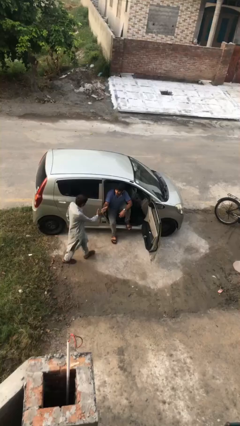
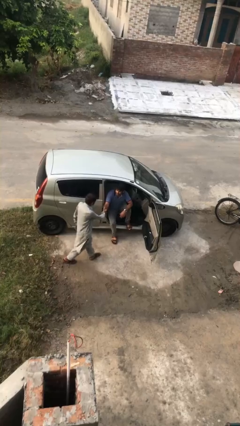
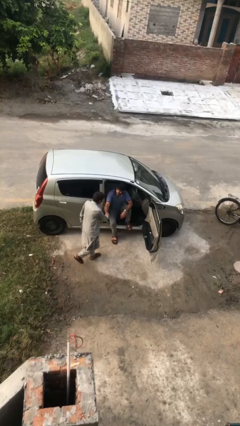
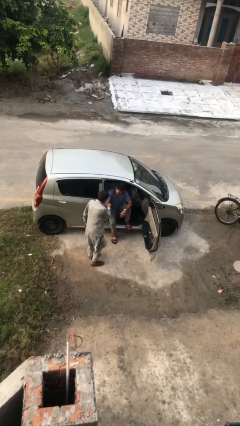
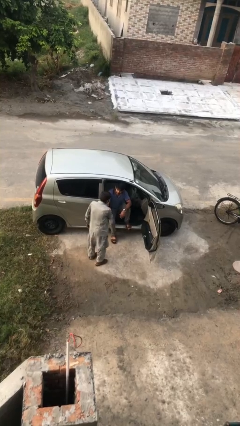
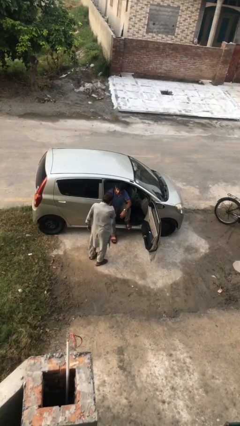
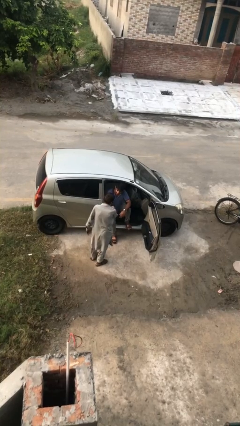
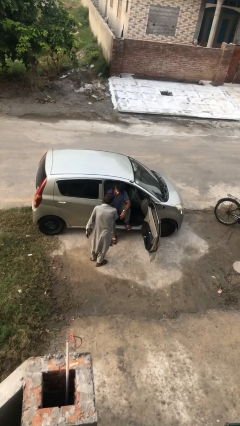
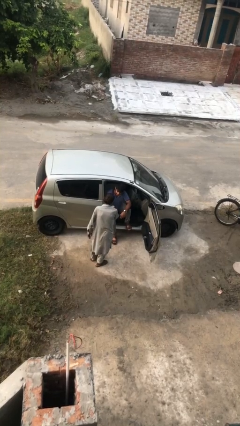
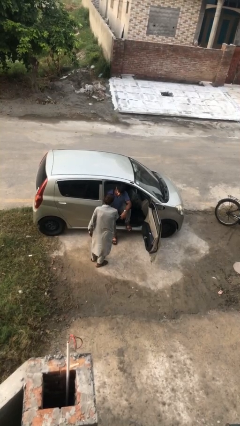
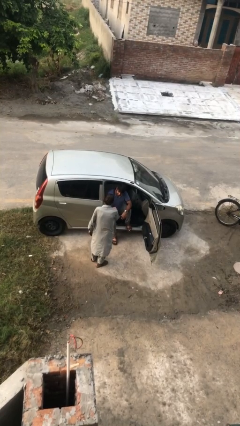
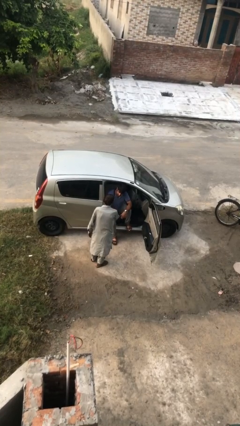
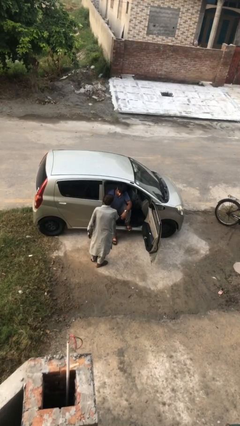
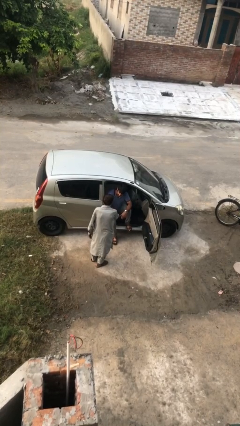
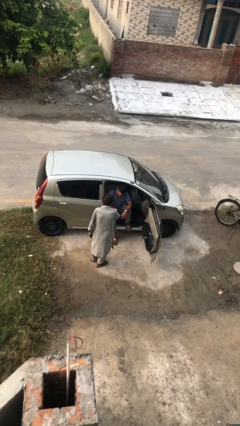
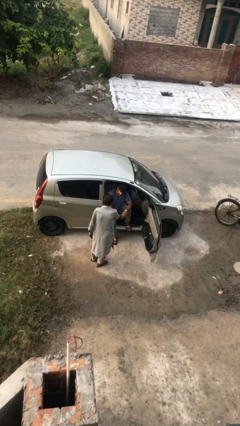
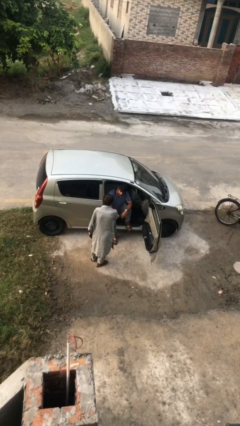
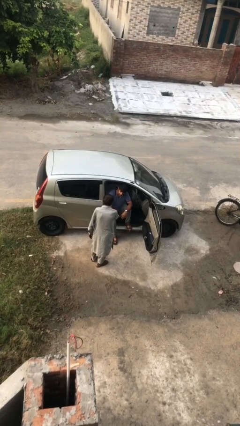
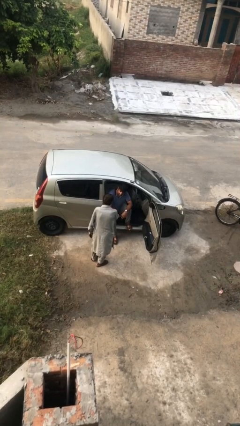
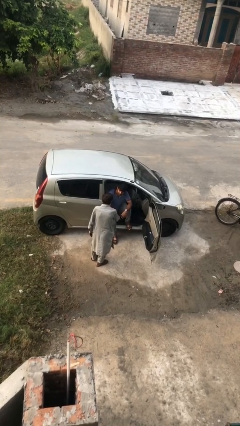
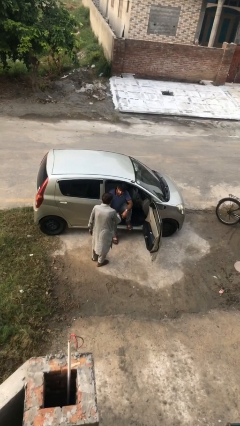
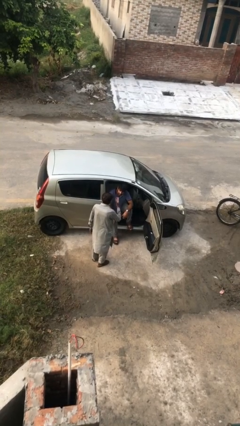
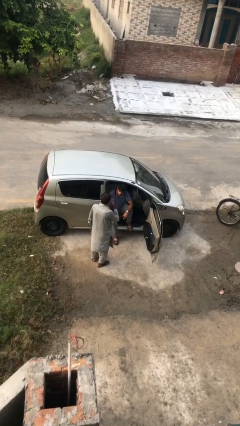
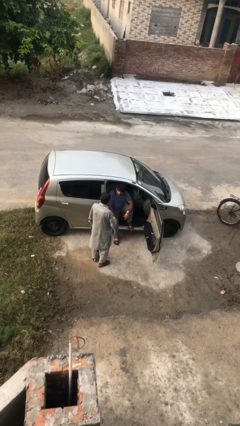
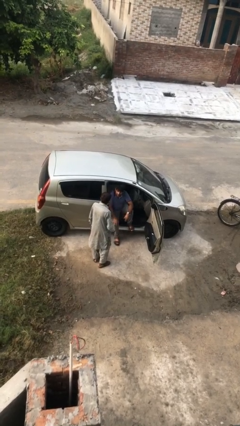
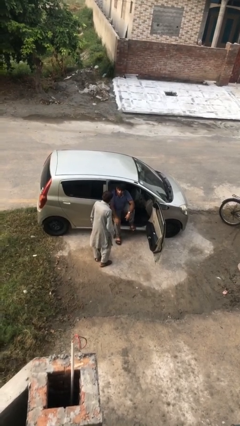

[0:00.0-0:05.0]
person shakes hand

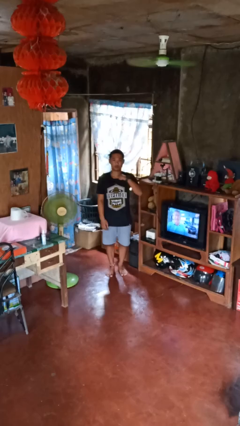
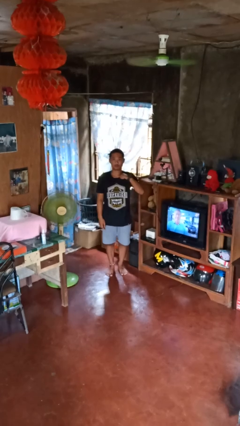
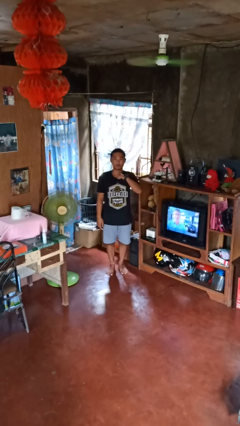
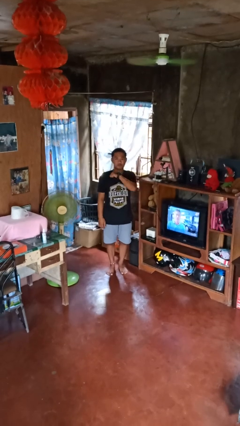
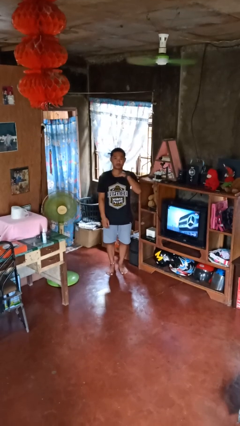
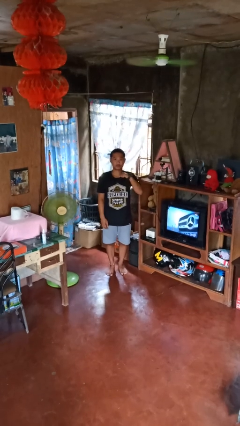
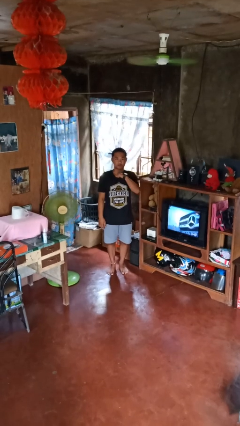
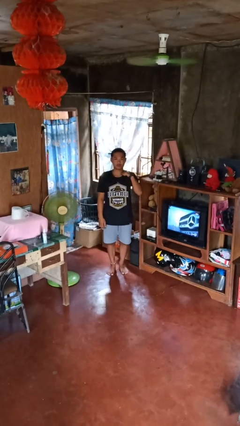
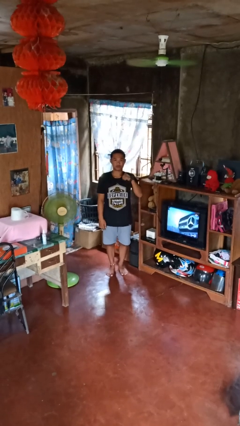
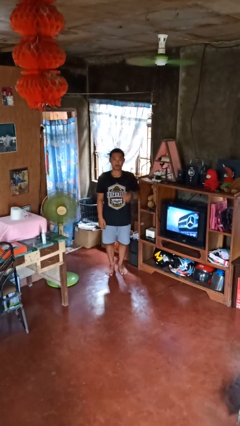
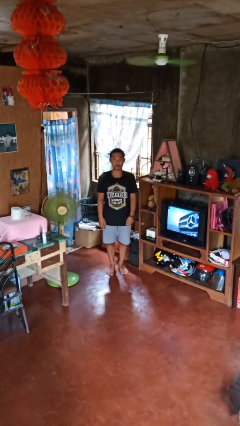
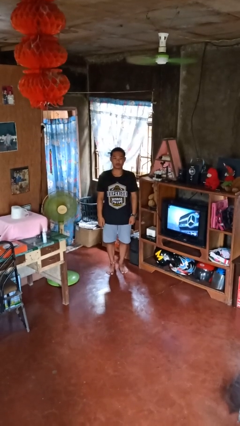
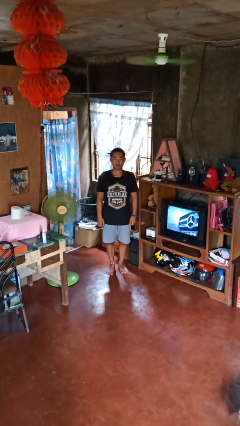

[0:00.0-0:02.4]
person gestures cut

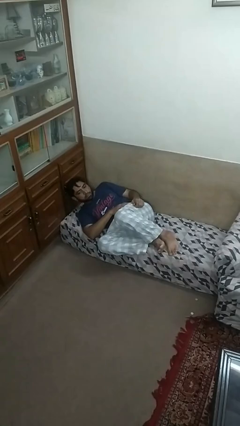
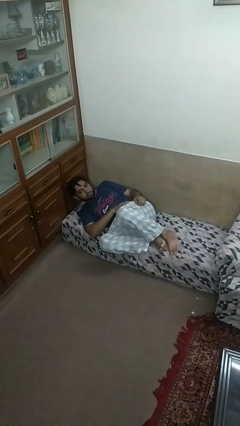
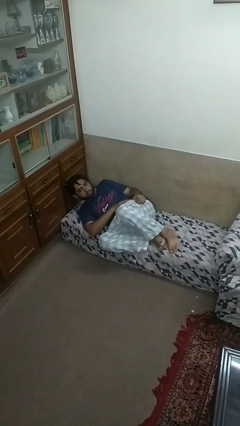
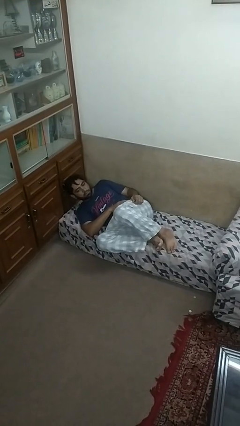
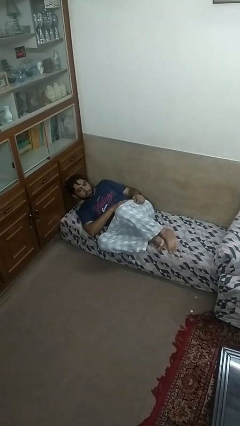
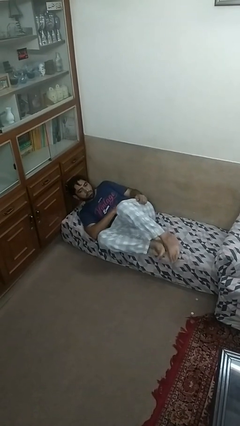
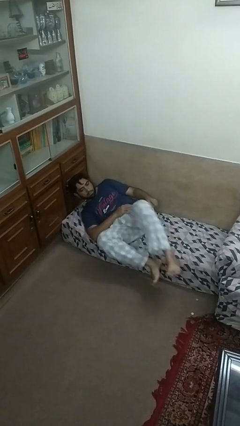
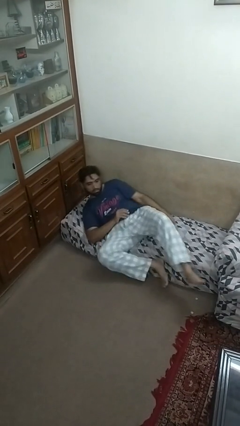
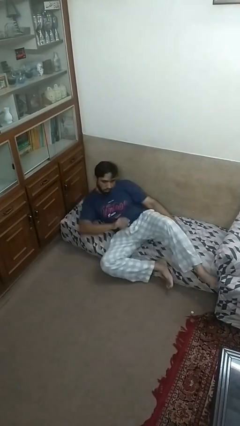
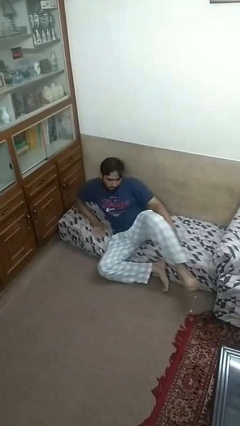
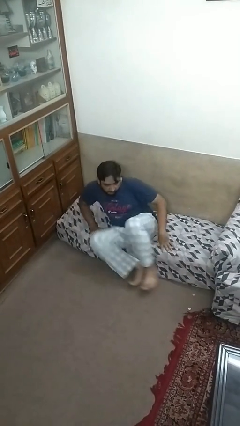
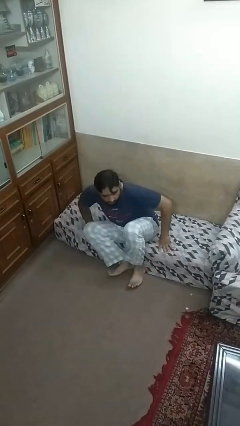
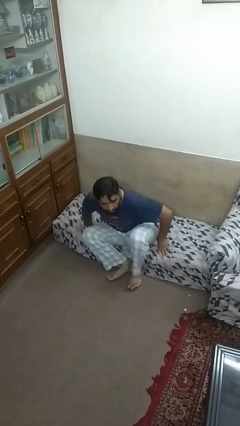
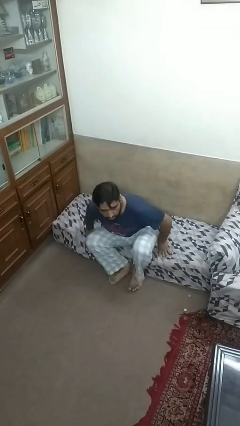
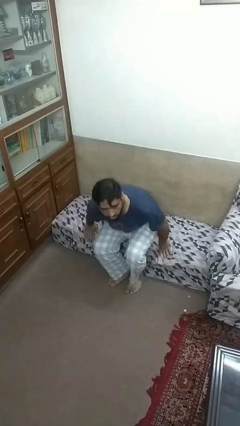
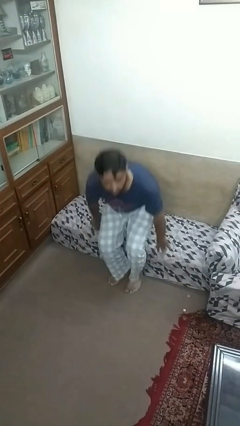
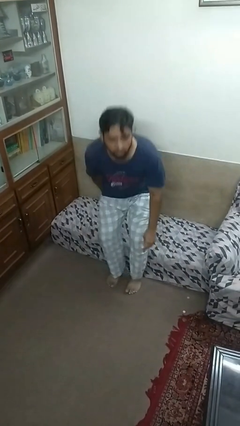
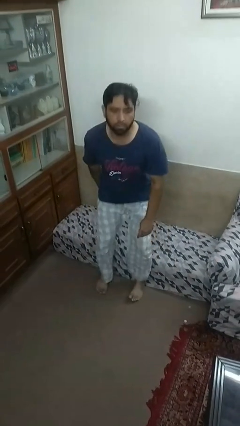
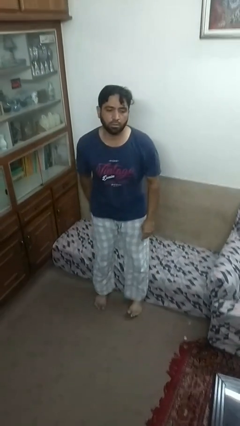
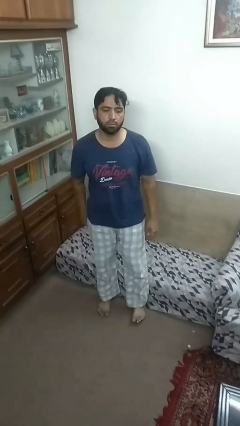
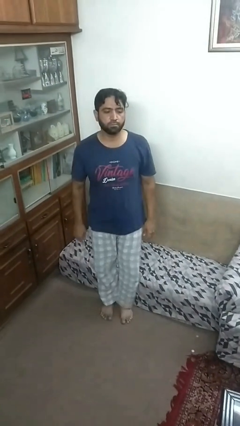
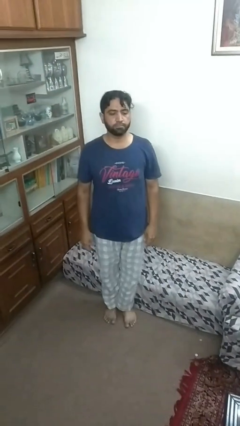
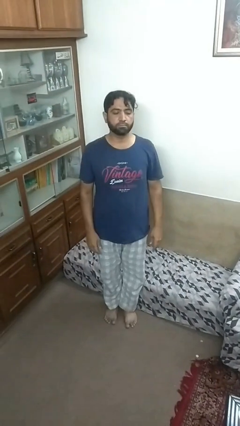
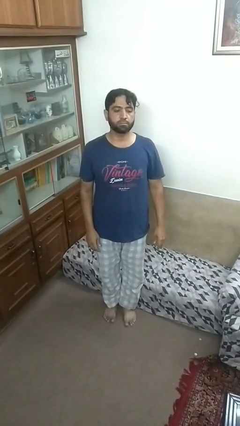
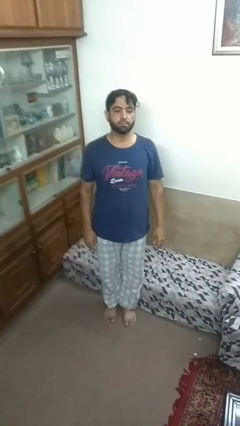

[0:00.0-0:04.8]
person stands up

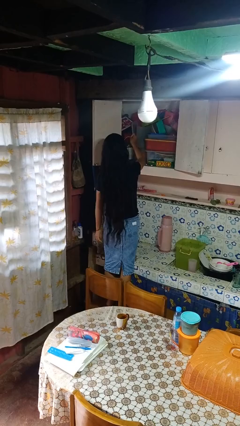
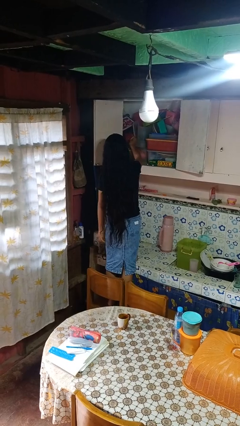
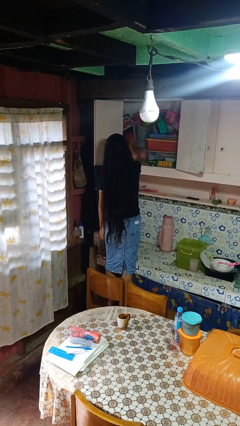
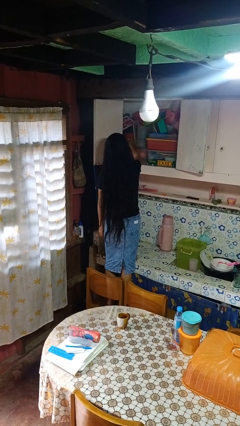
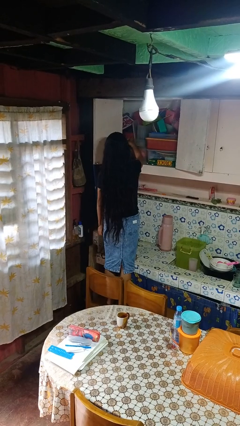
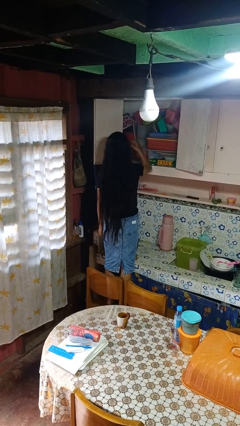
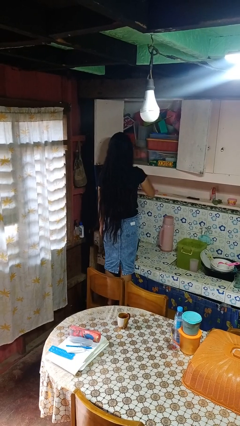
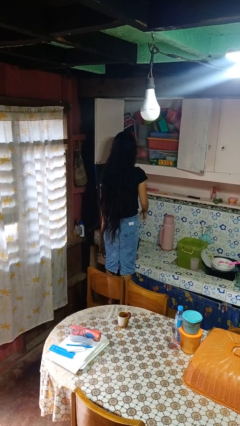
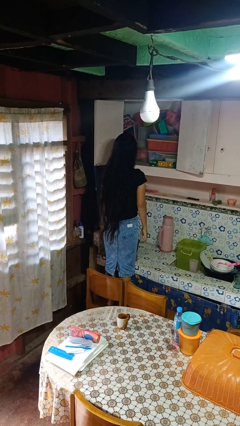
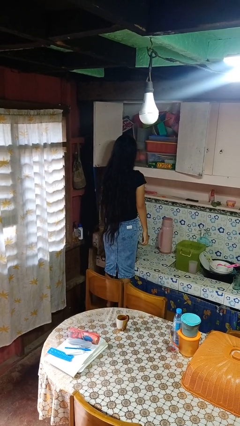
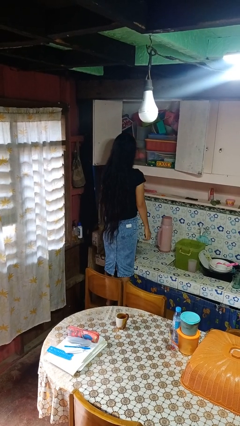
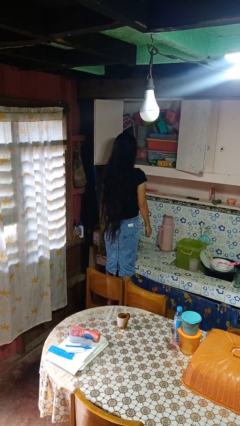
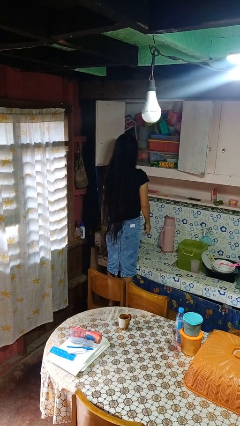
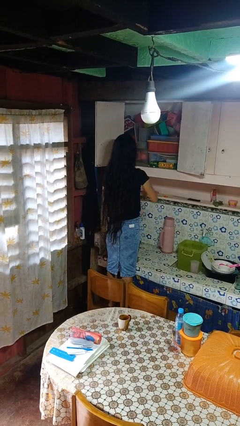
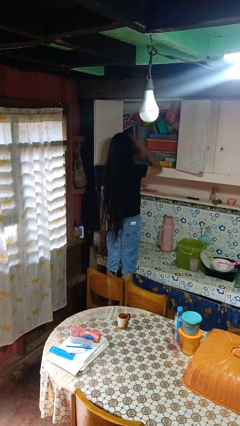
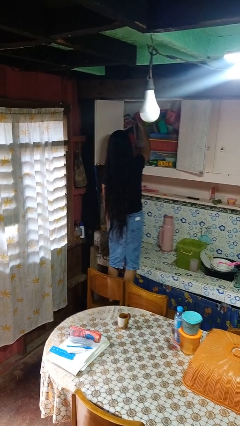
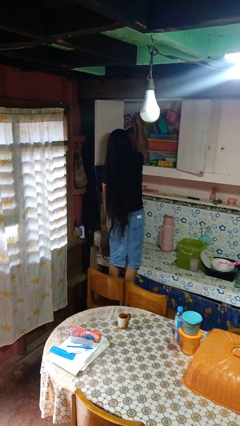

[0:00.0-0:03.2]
person puts object in cabinet

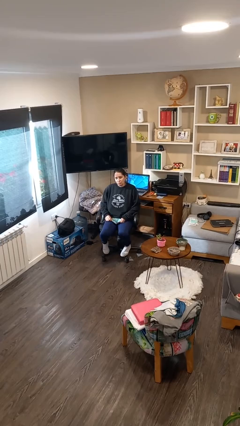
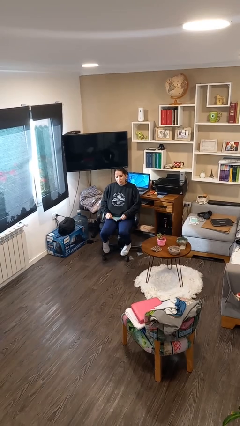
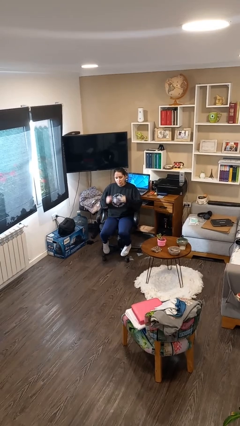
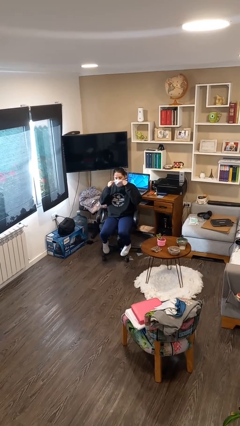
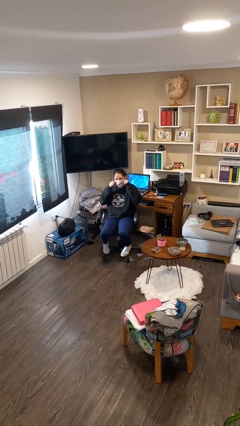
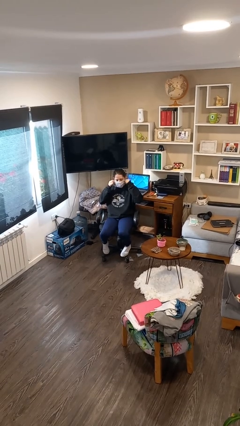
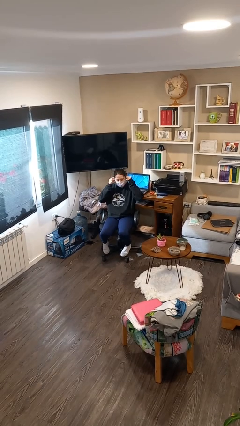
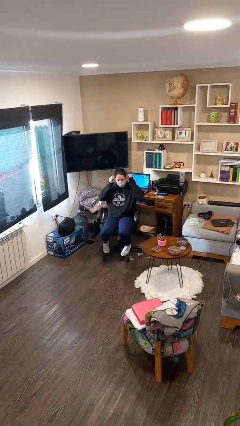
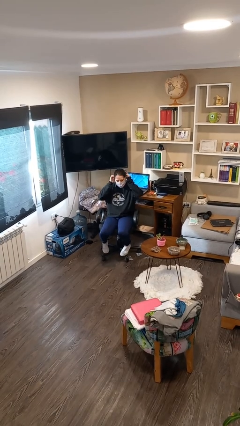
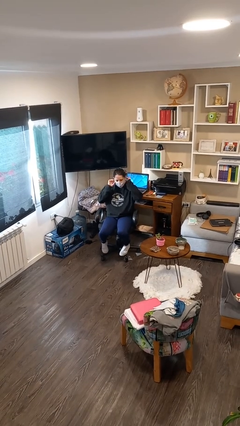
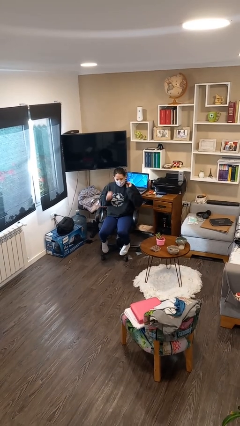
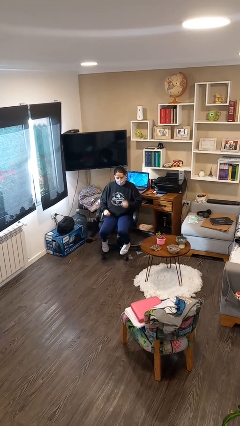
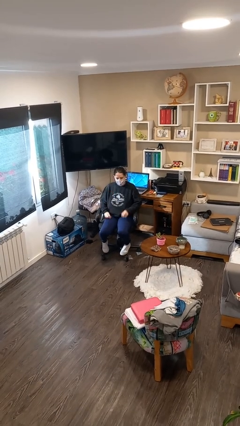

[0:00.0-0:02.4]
person puts on facemask
